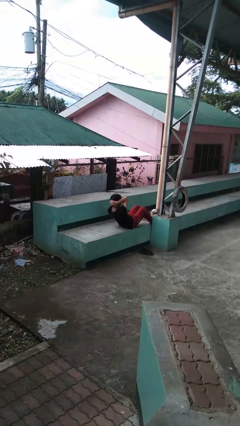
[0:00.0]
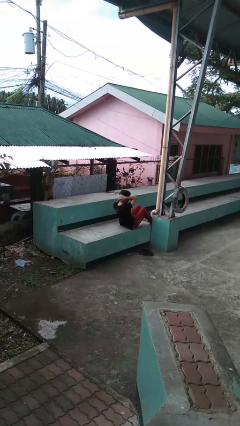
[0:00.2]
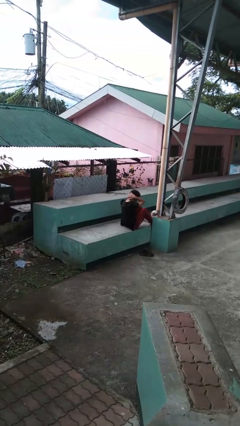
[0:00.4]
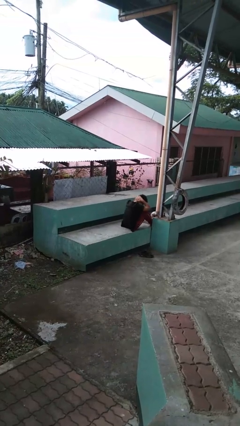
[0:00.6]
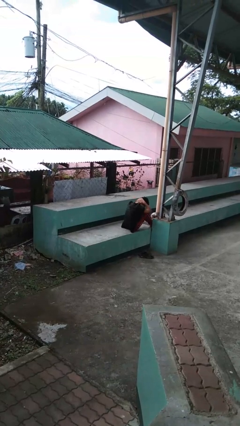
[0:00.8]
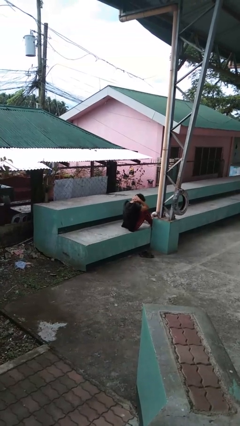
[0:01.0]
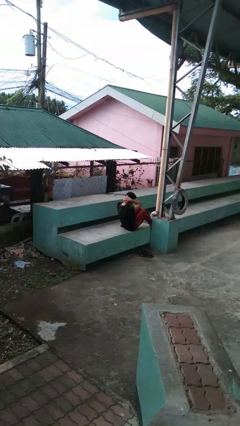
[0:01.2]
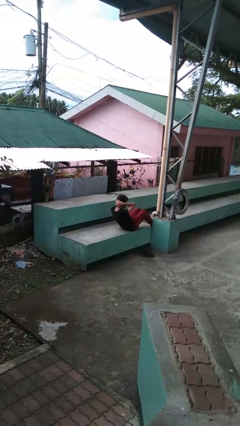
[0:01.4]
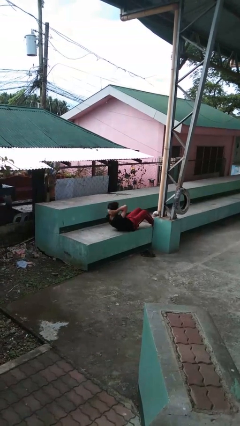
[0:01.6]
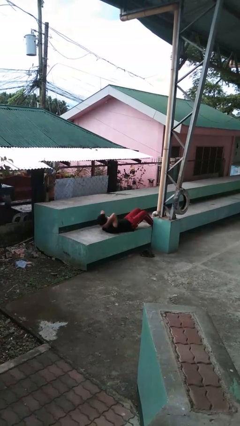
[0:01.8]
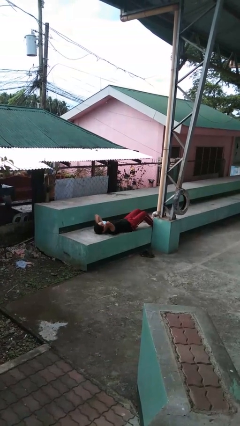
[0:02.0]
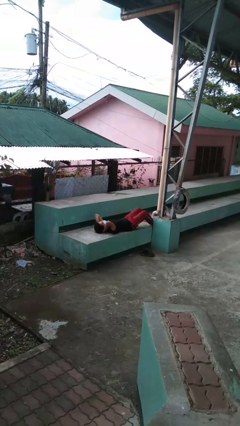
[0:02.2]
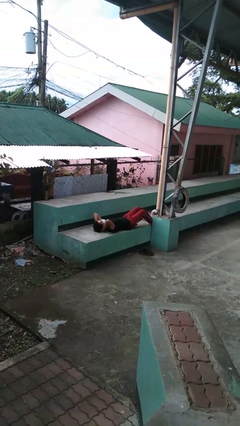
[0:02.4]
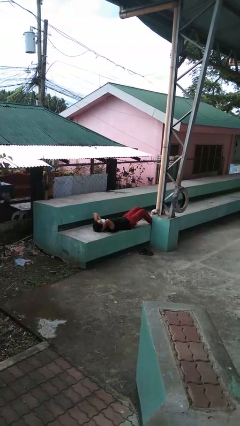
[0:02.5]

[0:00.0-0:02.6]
person exercises with situp

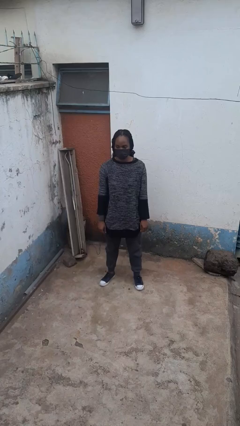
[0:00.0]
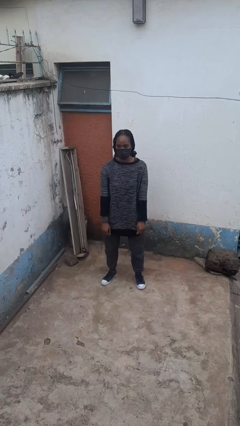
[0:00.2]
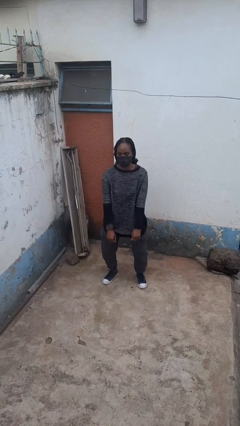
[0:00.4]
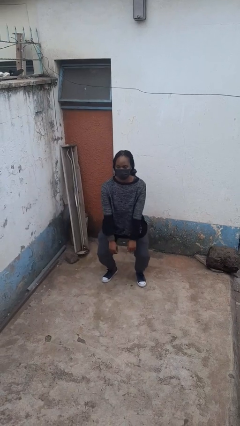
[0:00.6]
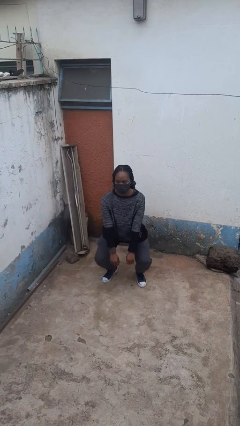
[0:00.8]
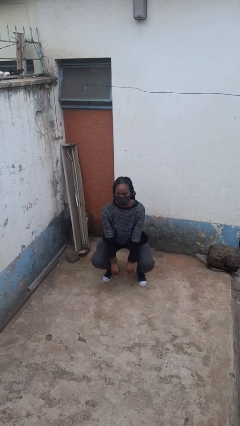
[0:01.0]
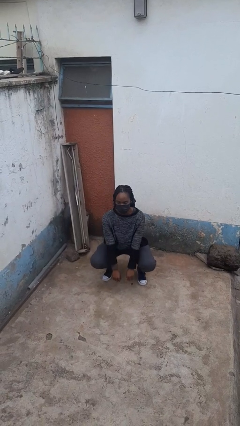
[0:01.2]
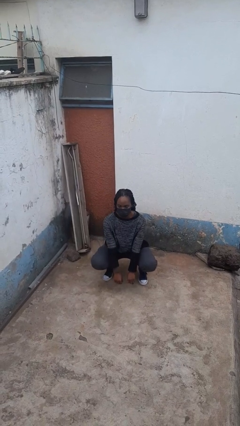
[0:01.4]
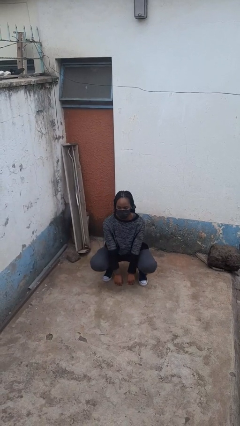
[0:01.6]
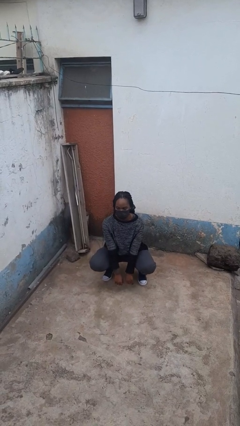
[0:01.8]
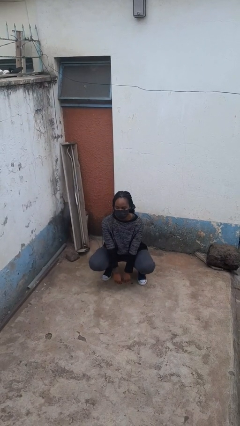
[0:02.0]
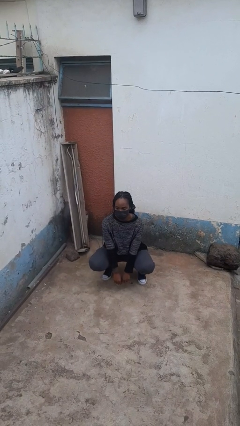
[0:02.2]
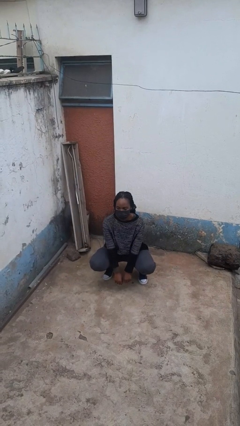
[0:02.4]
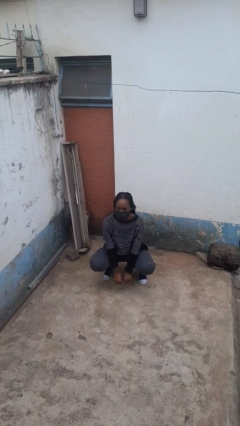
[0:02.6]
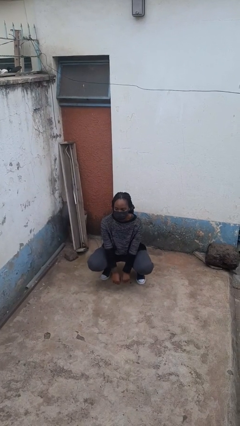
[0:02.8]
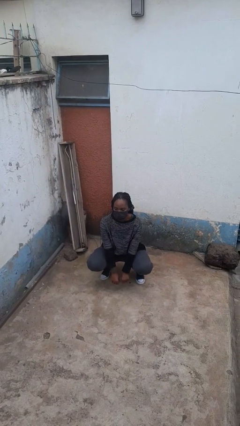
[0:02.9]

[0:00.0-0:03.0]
person squats

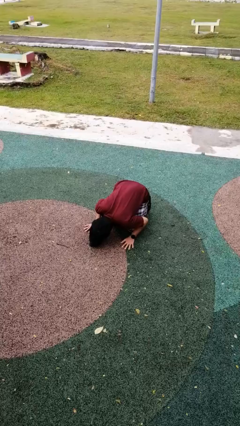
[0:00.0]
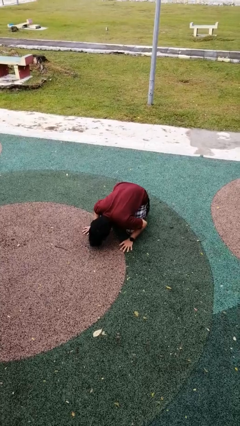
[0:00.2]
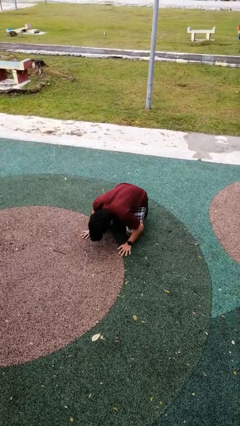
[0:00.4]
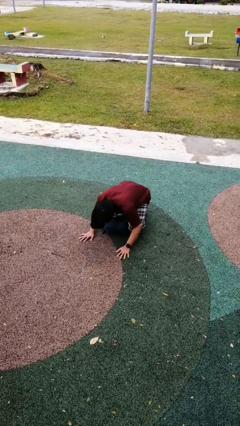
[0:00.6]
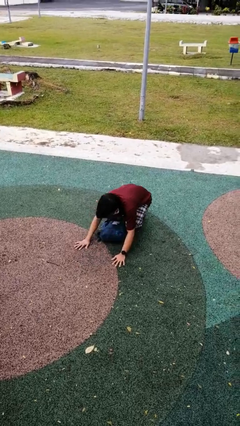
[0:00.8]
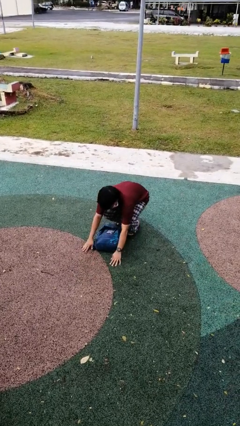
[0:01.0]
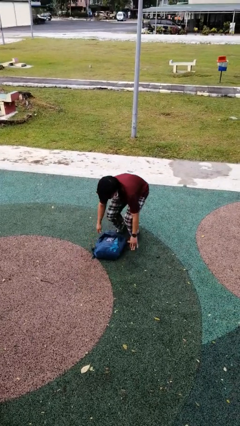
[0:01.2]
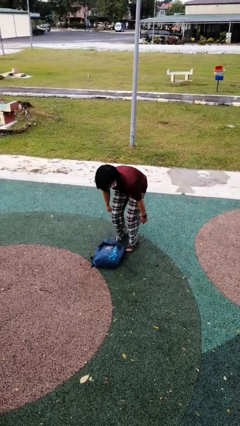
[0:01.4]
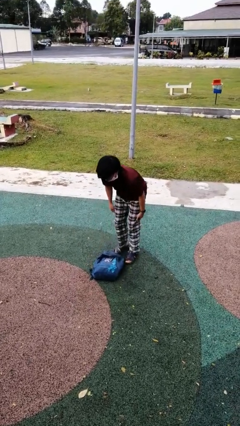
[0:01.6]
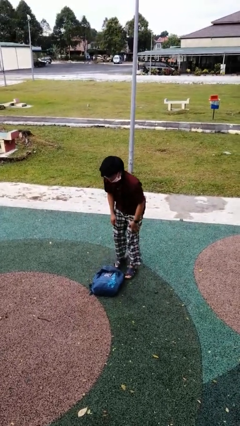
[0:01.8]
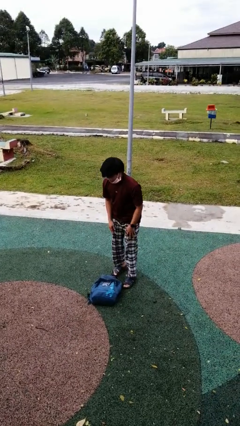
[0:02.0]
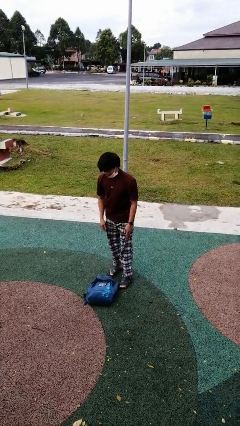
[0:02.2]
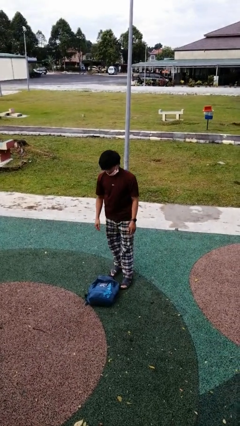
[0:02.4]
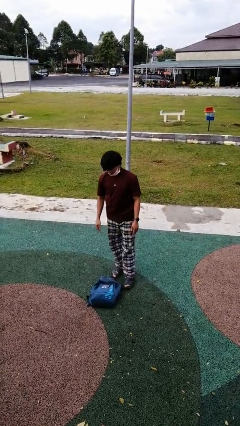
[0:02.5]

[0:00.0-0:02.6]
person stands up from floor

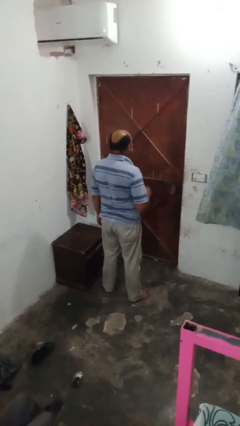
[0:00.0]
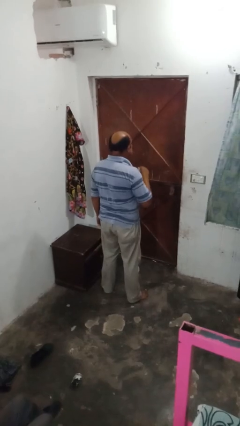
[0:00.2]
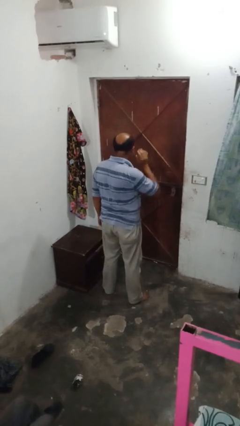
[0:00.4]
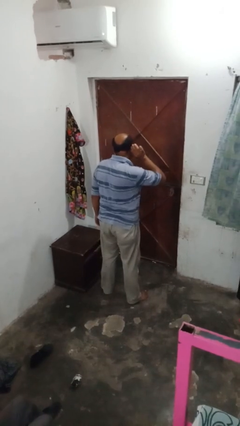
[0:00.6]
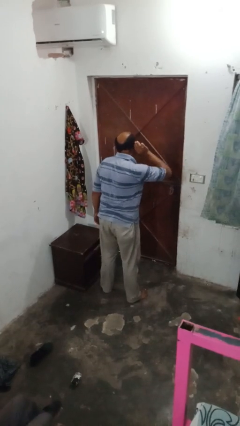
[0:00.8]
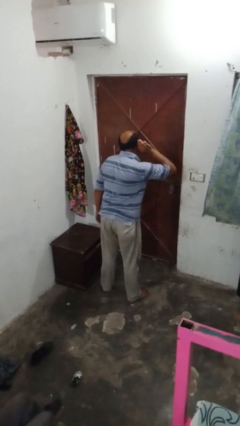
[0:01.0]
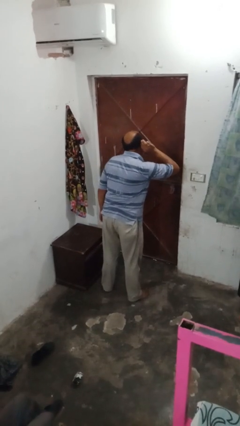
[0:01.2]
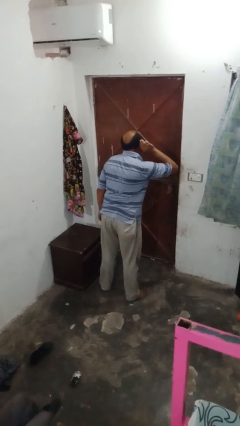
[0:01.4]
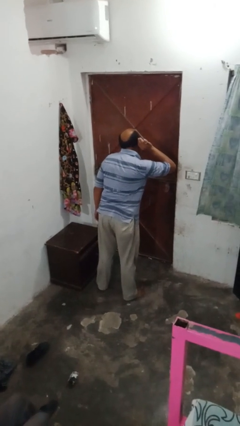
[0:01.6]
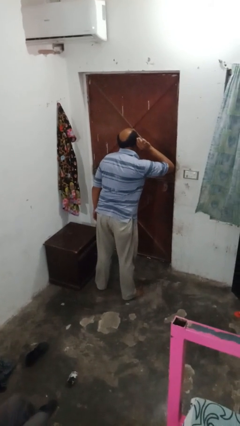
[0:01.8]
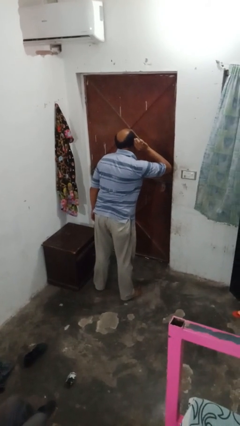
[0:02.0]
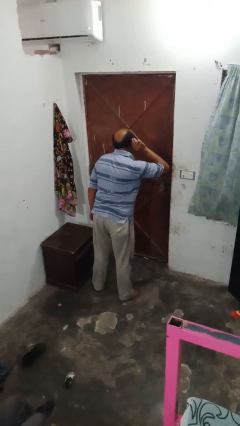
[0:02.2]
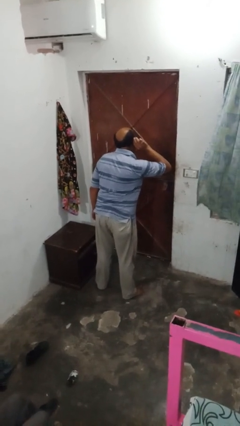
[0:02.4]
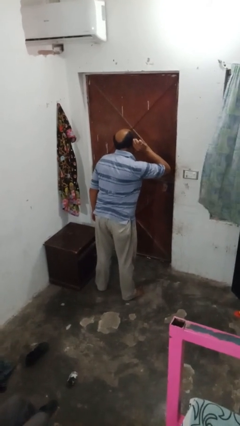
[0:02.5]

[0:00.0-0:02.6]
person gestures listen closely

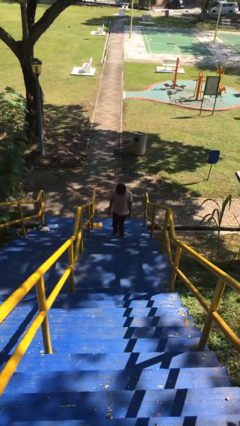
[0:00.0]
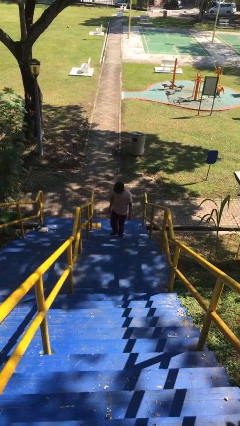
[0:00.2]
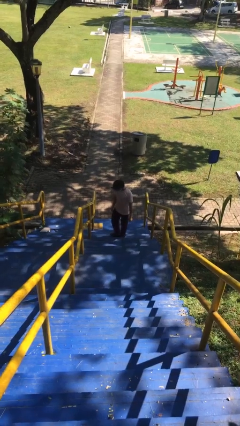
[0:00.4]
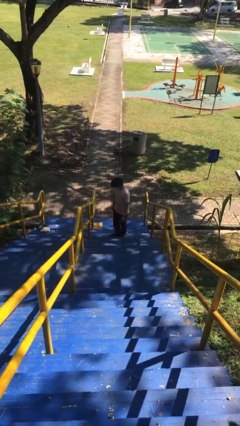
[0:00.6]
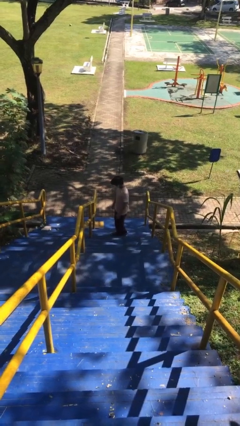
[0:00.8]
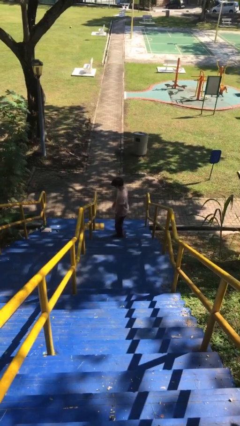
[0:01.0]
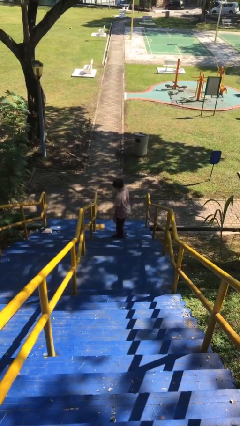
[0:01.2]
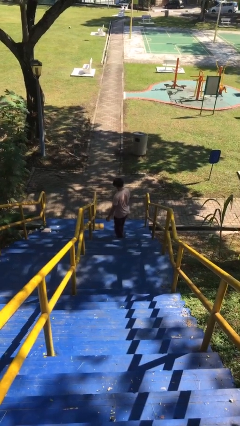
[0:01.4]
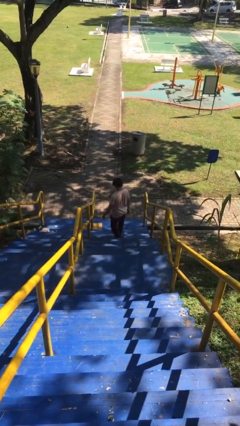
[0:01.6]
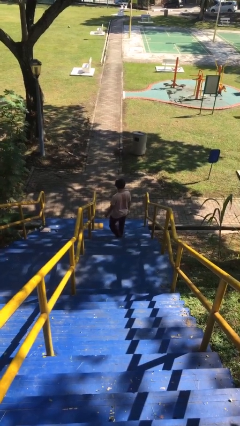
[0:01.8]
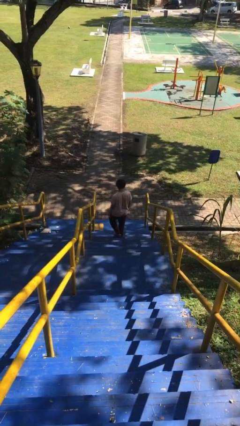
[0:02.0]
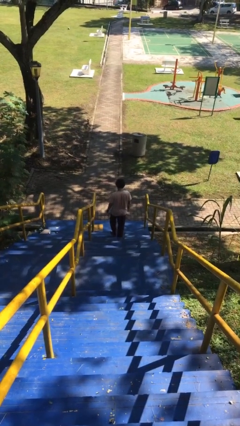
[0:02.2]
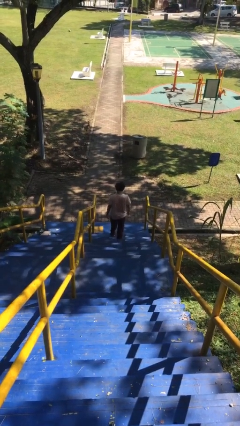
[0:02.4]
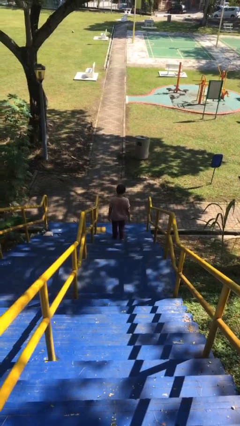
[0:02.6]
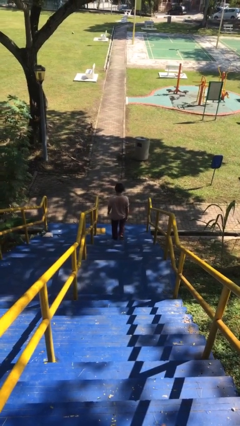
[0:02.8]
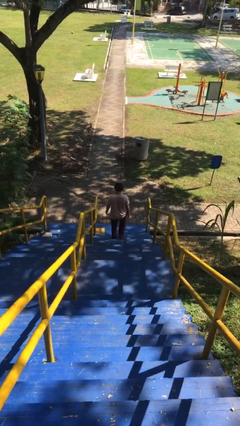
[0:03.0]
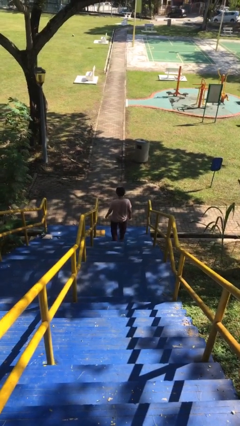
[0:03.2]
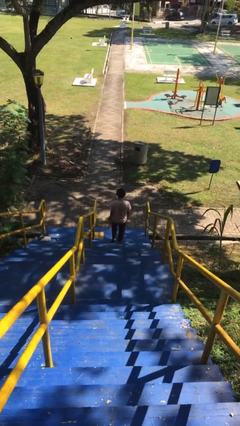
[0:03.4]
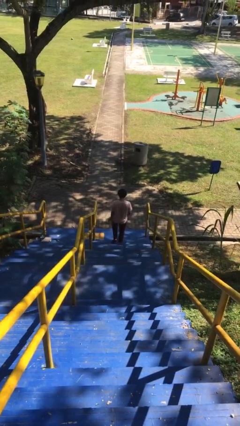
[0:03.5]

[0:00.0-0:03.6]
person climbs down stairs

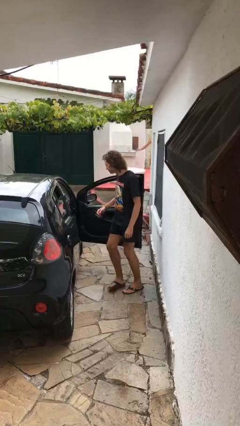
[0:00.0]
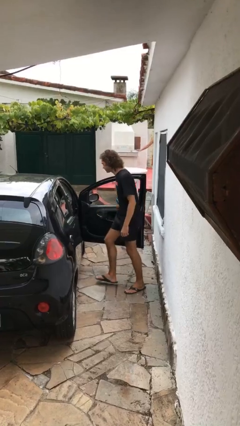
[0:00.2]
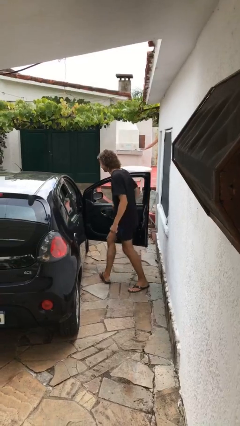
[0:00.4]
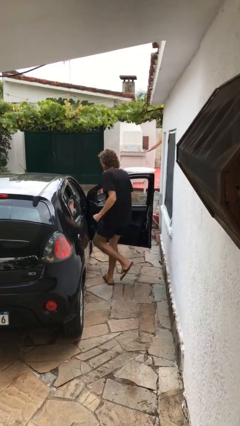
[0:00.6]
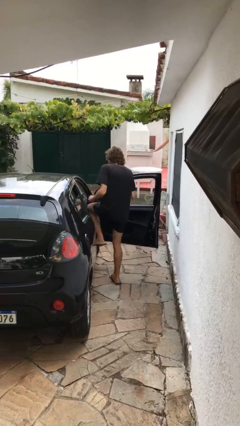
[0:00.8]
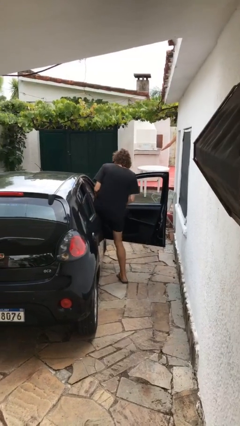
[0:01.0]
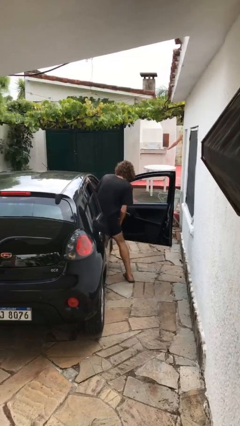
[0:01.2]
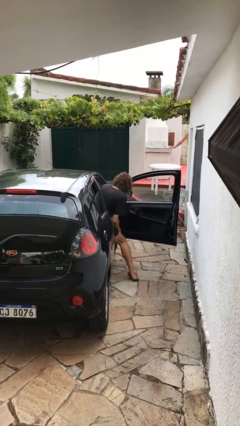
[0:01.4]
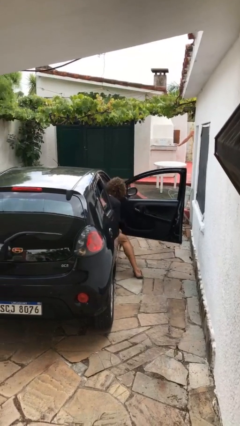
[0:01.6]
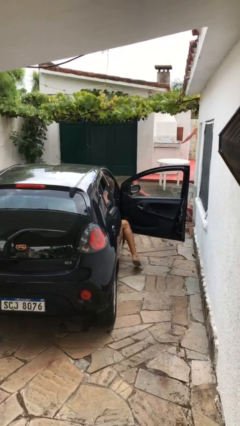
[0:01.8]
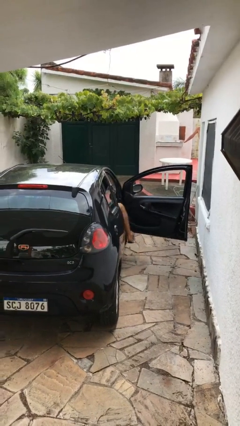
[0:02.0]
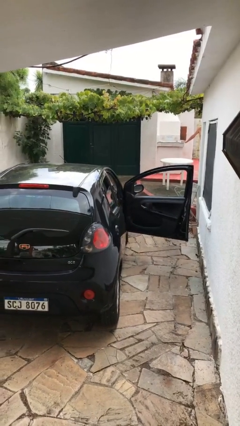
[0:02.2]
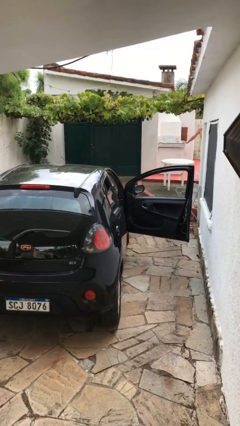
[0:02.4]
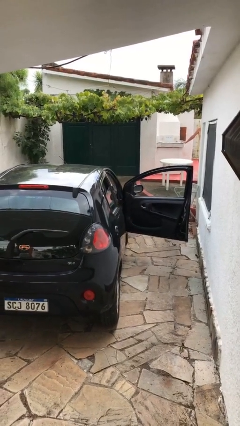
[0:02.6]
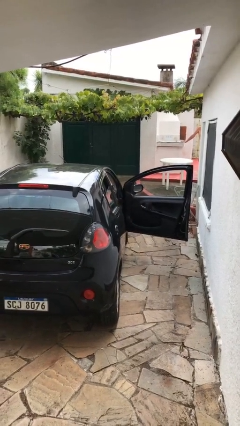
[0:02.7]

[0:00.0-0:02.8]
person enters car
